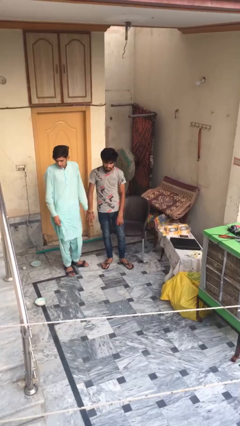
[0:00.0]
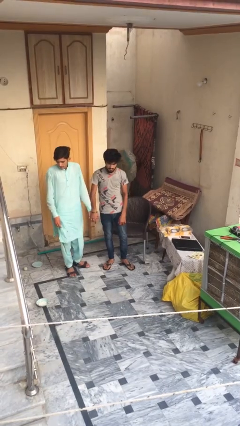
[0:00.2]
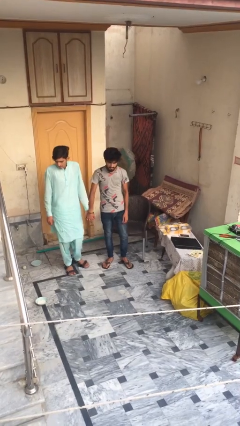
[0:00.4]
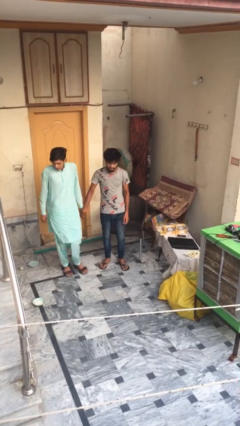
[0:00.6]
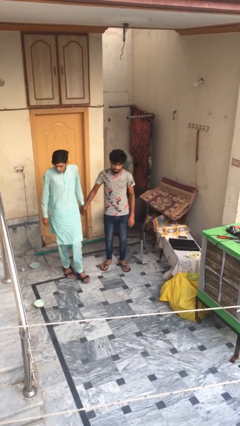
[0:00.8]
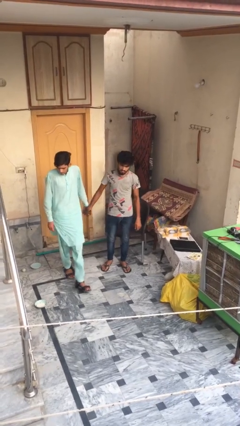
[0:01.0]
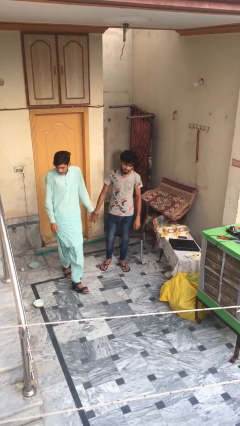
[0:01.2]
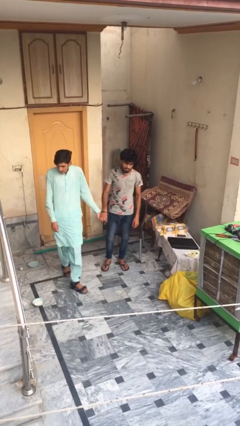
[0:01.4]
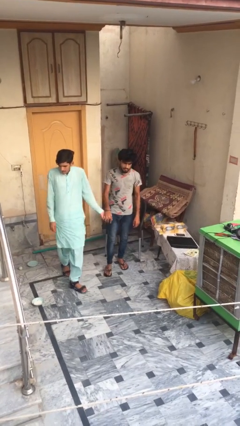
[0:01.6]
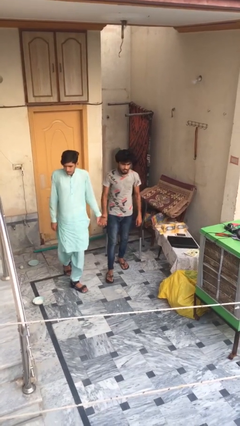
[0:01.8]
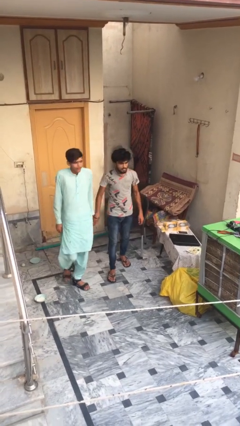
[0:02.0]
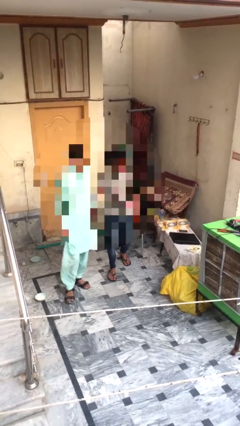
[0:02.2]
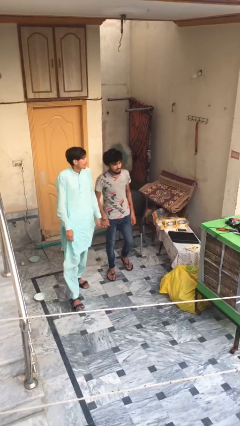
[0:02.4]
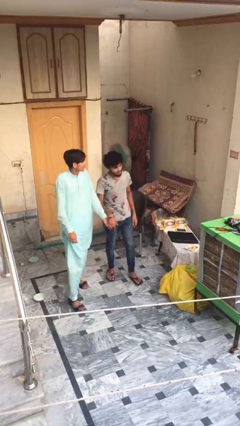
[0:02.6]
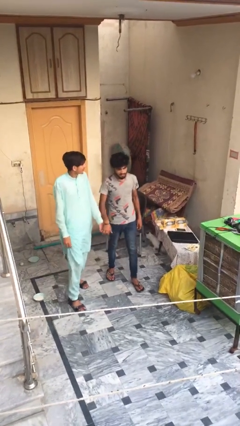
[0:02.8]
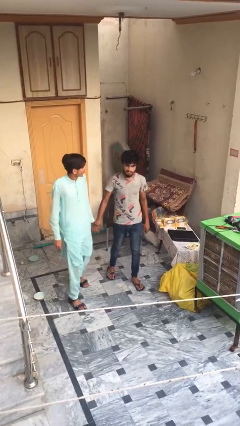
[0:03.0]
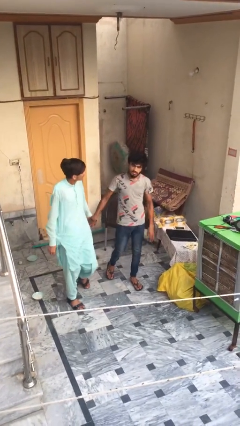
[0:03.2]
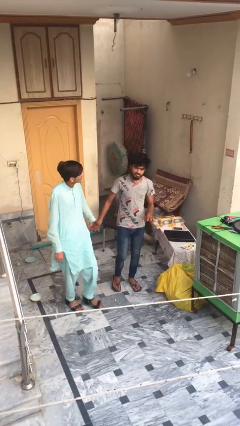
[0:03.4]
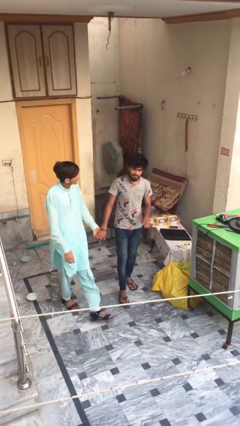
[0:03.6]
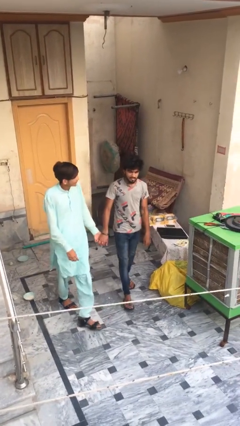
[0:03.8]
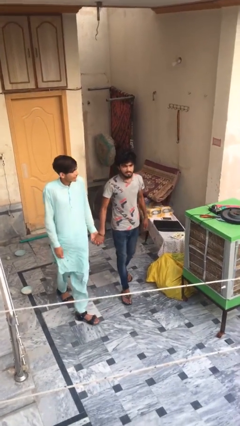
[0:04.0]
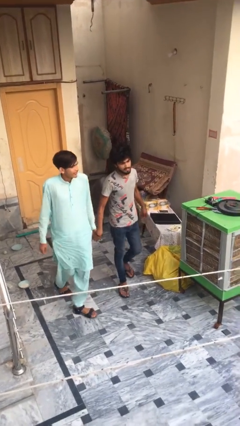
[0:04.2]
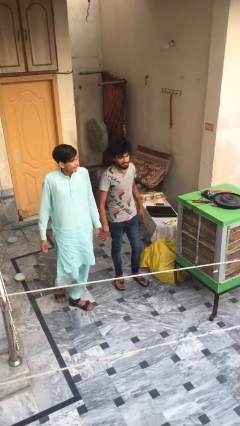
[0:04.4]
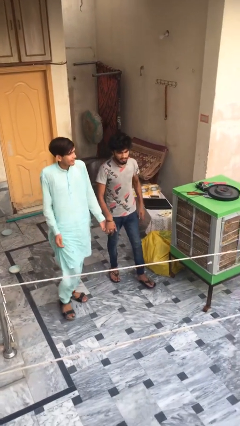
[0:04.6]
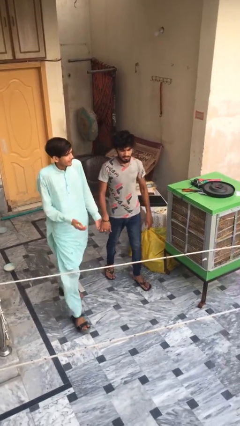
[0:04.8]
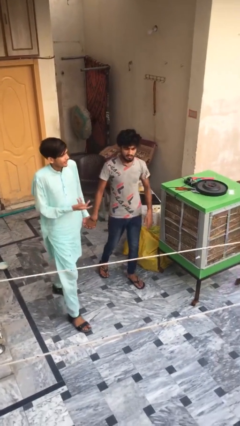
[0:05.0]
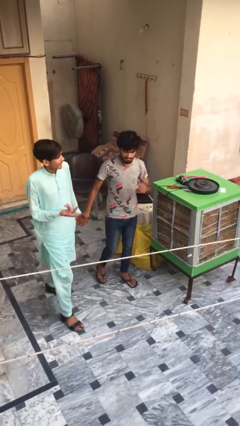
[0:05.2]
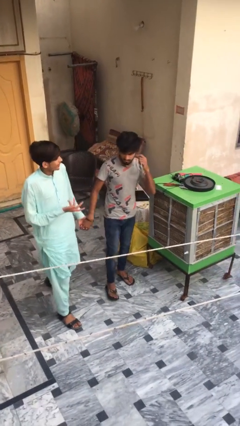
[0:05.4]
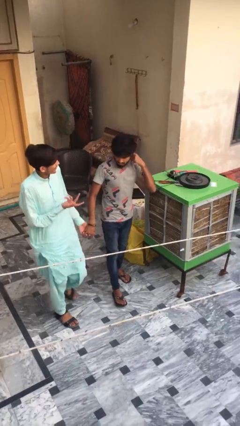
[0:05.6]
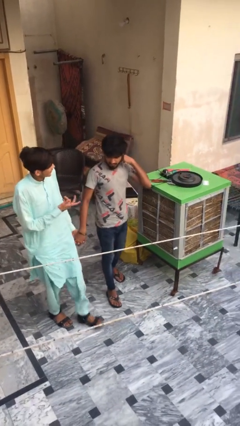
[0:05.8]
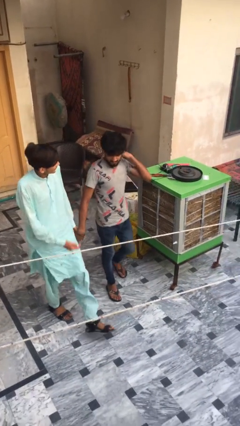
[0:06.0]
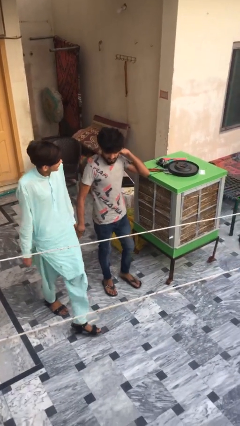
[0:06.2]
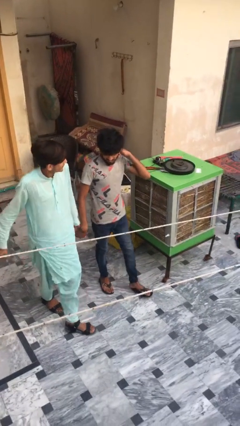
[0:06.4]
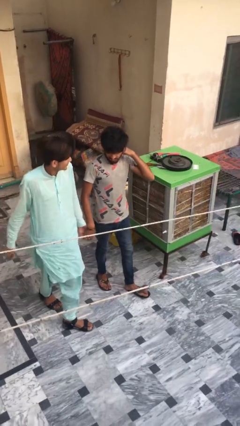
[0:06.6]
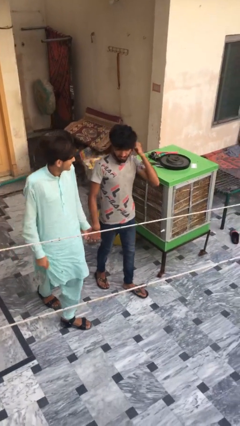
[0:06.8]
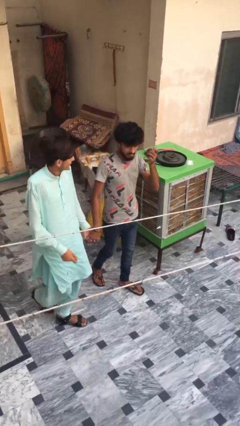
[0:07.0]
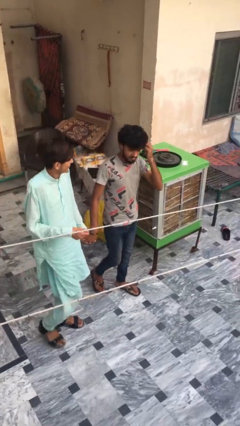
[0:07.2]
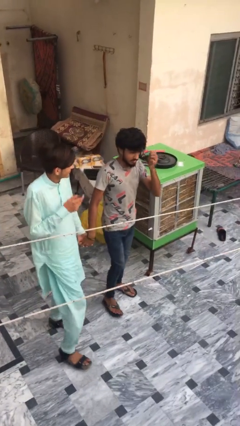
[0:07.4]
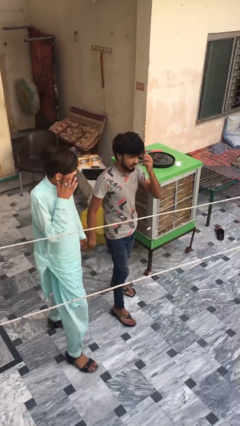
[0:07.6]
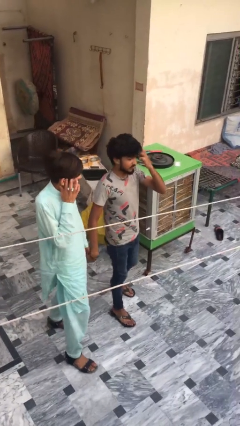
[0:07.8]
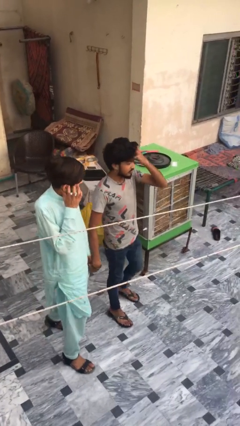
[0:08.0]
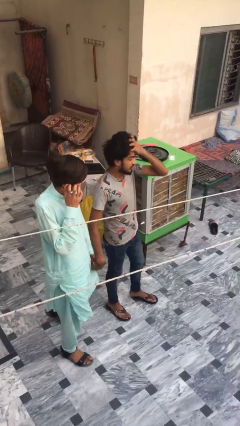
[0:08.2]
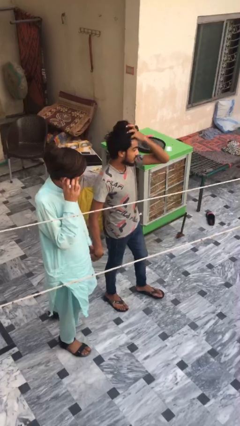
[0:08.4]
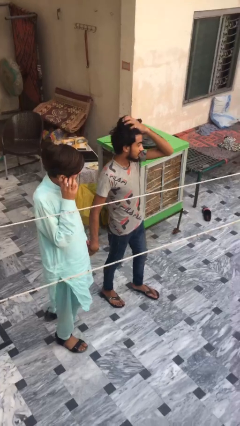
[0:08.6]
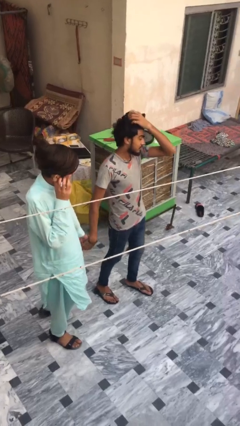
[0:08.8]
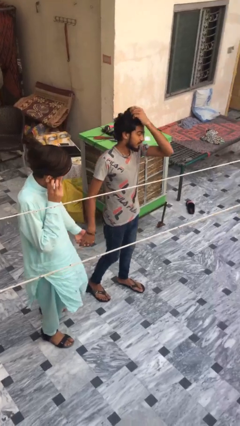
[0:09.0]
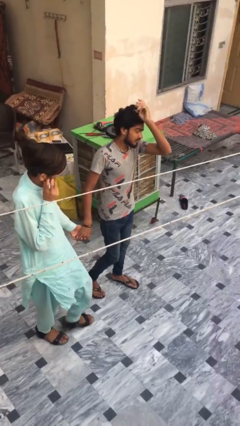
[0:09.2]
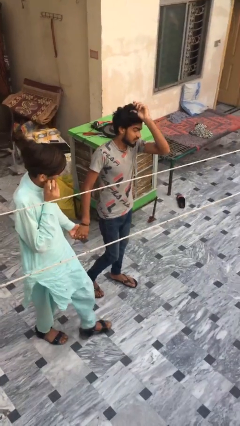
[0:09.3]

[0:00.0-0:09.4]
person holds hand

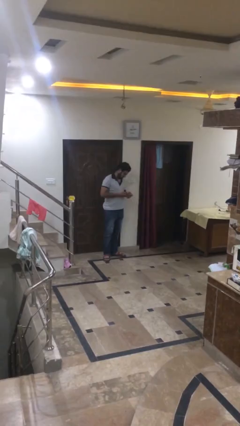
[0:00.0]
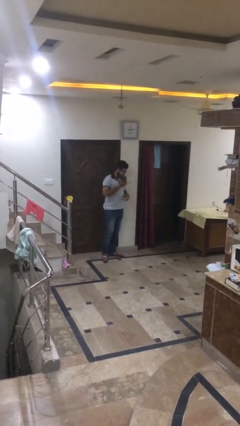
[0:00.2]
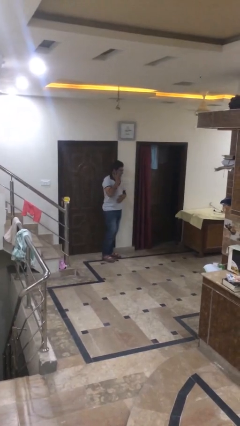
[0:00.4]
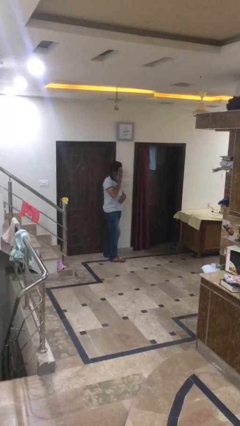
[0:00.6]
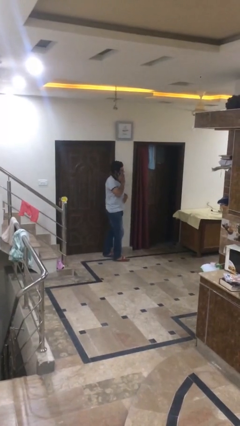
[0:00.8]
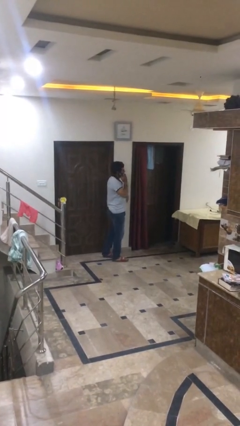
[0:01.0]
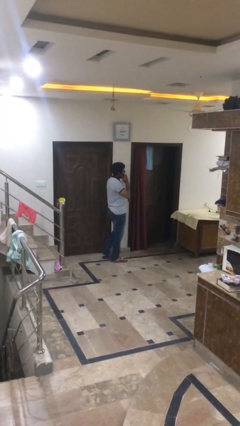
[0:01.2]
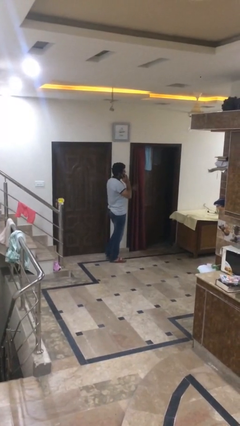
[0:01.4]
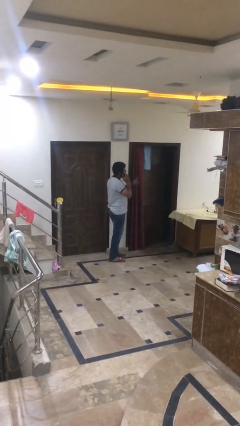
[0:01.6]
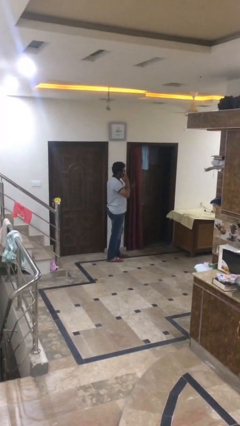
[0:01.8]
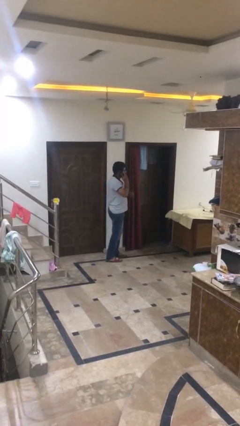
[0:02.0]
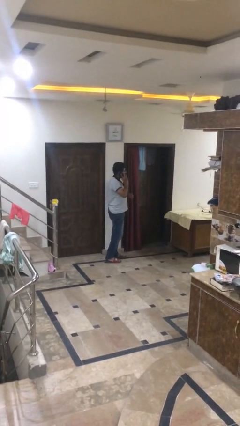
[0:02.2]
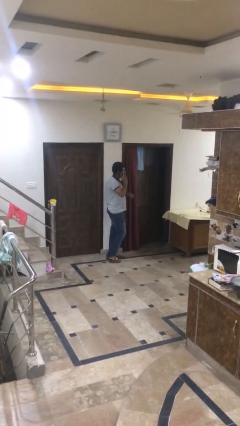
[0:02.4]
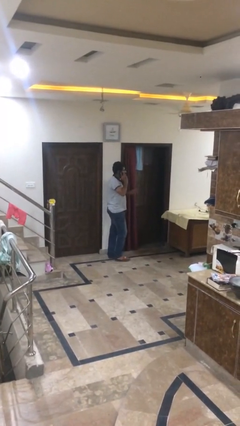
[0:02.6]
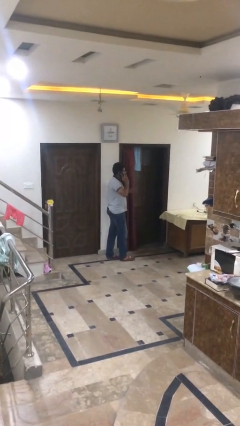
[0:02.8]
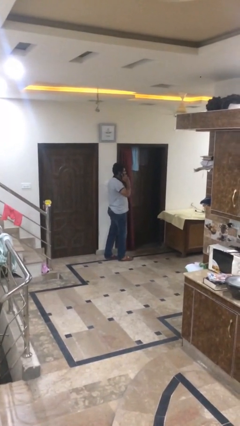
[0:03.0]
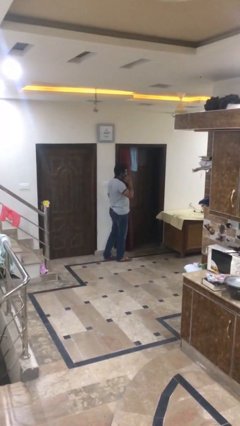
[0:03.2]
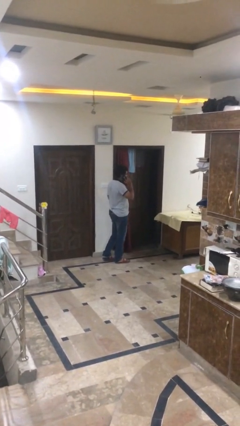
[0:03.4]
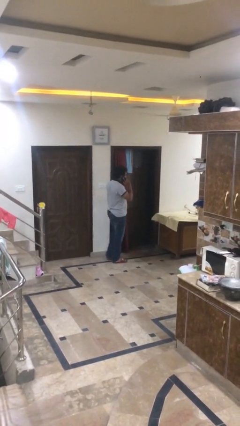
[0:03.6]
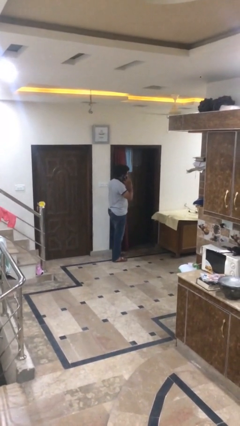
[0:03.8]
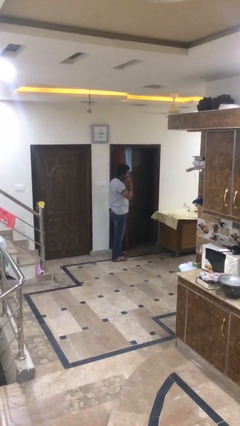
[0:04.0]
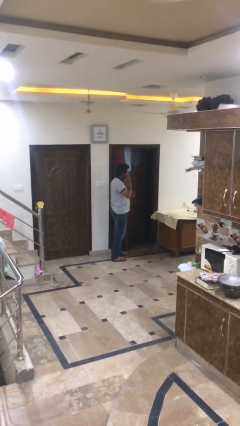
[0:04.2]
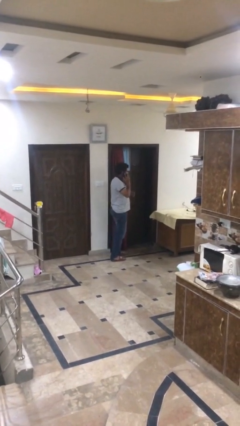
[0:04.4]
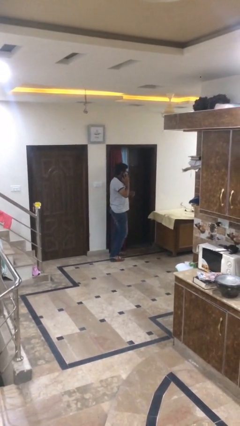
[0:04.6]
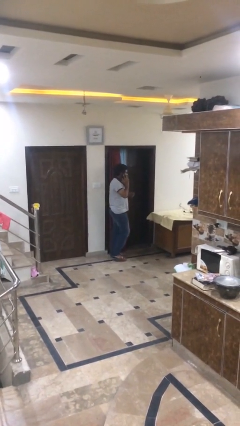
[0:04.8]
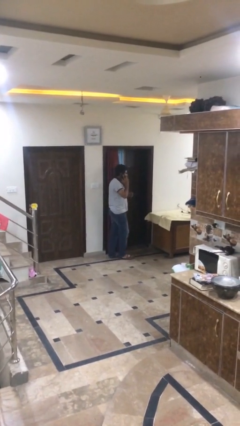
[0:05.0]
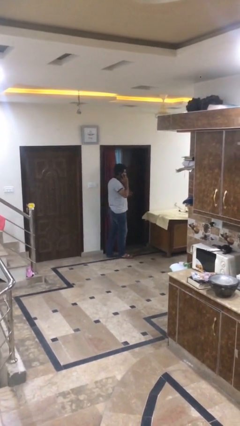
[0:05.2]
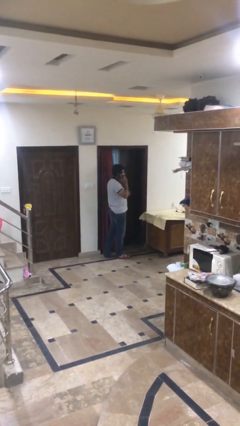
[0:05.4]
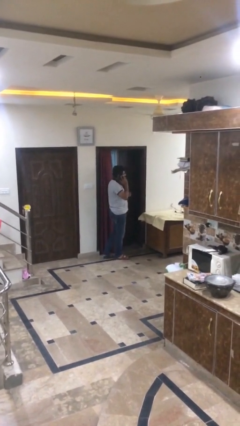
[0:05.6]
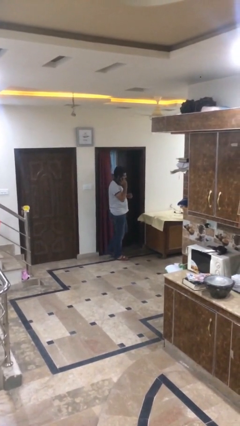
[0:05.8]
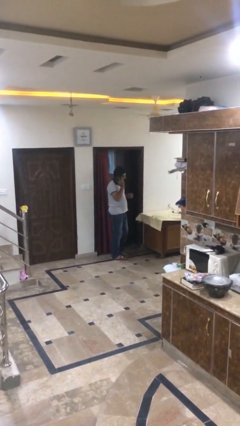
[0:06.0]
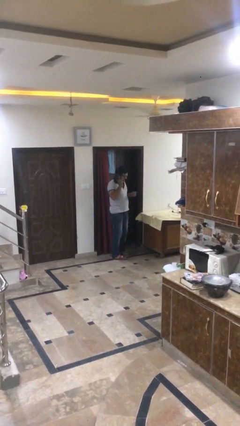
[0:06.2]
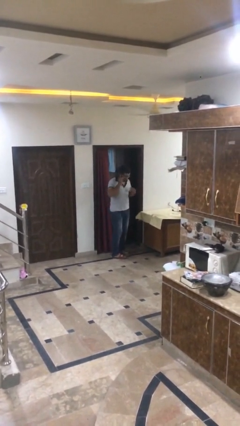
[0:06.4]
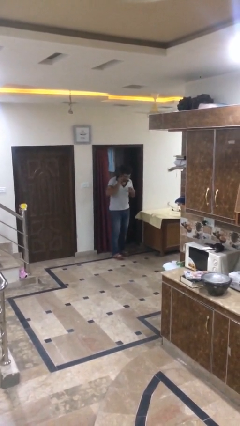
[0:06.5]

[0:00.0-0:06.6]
person talks on phone

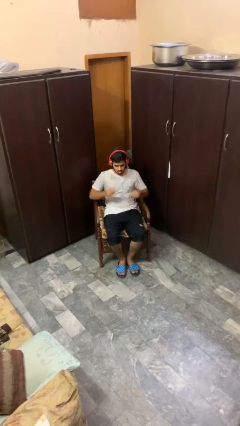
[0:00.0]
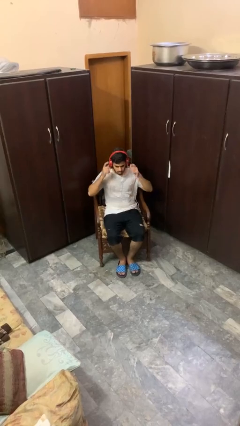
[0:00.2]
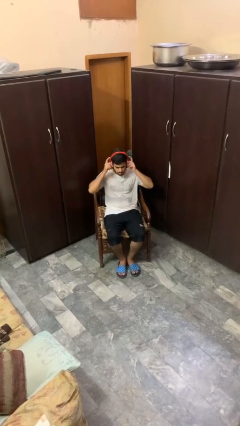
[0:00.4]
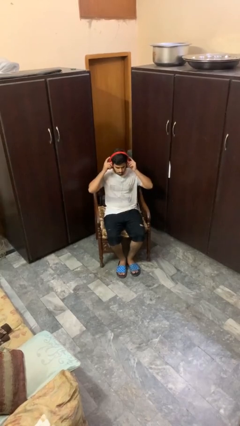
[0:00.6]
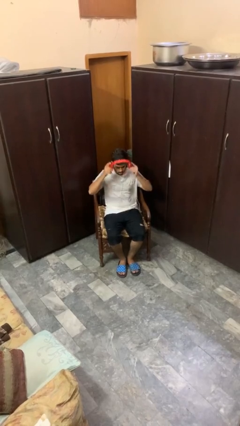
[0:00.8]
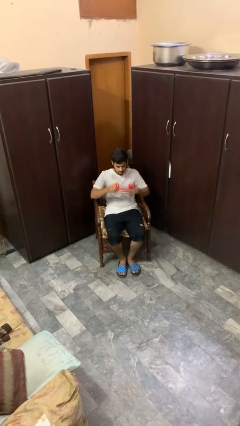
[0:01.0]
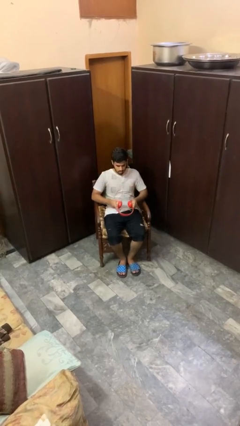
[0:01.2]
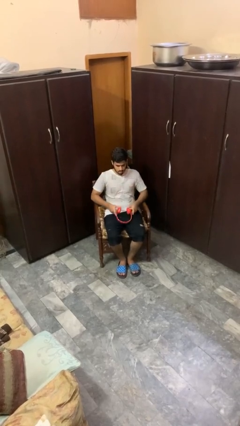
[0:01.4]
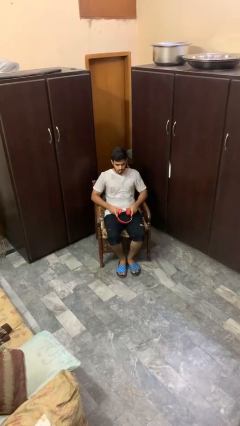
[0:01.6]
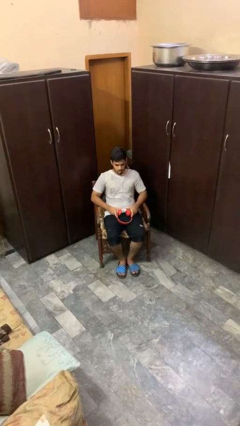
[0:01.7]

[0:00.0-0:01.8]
person takes off headphones
